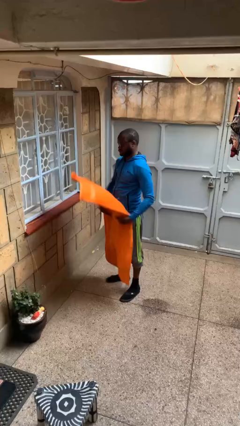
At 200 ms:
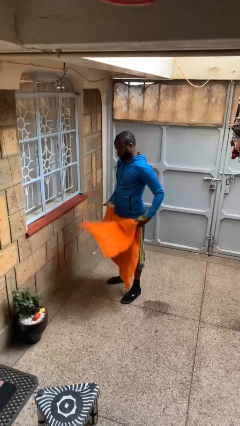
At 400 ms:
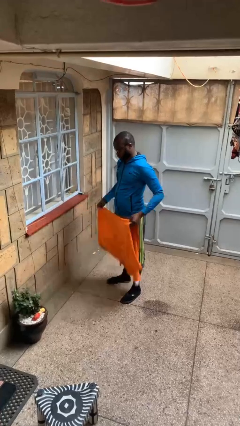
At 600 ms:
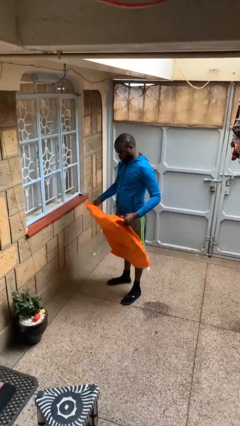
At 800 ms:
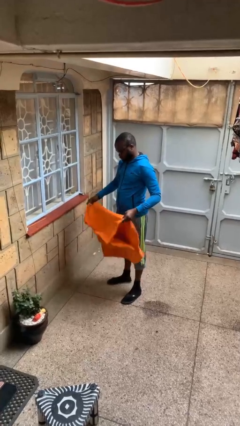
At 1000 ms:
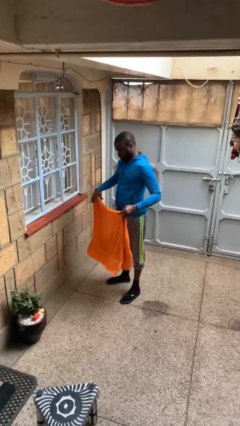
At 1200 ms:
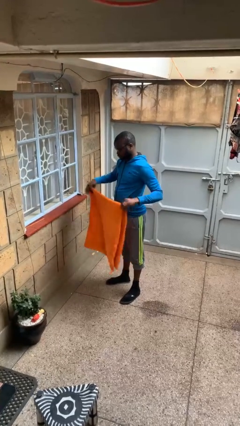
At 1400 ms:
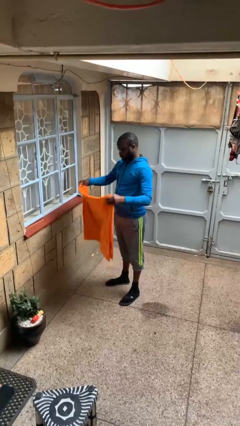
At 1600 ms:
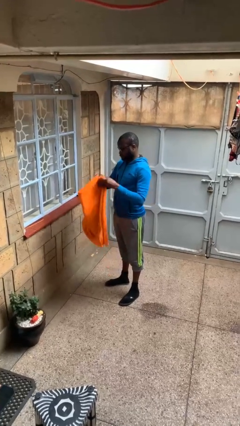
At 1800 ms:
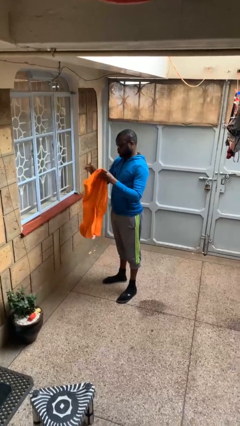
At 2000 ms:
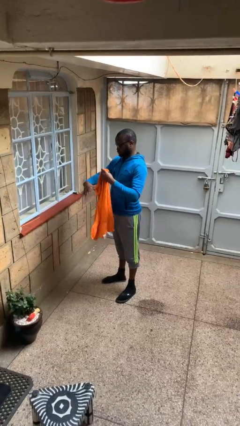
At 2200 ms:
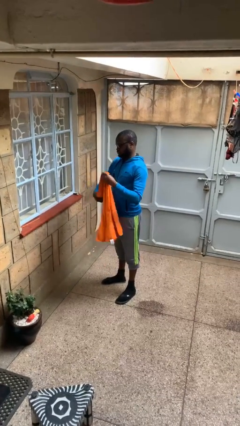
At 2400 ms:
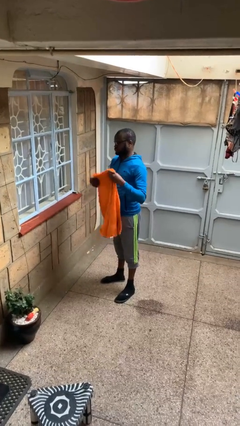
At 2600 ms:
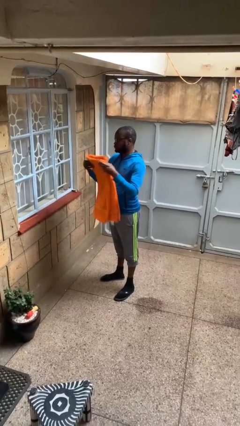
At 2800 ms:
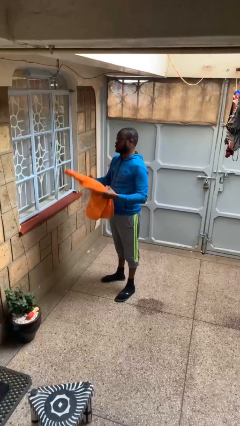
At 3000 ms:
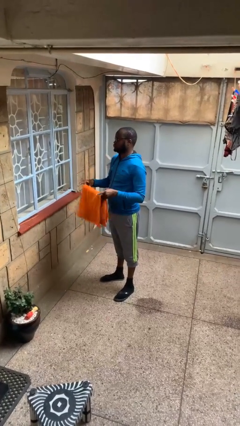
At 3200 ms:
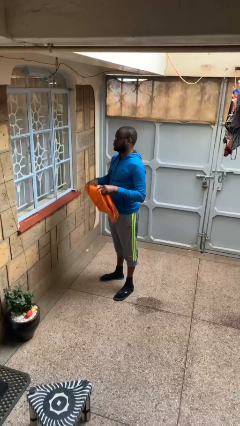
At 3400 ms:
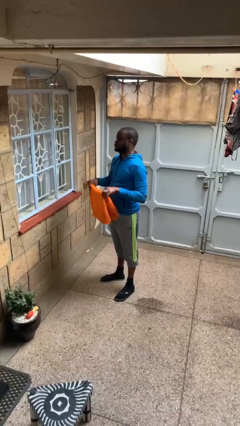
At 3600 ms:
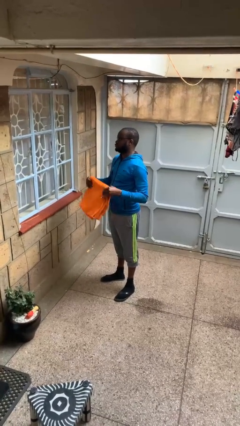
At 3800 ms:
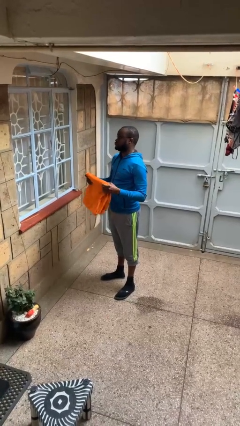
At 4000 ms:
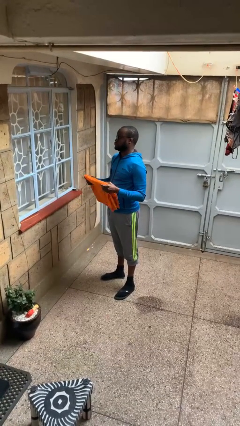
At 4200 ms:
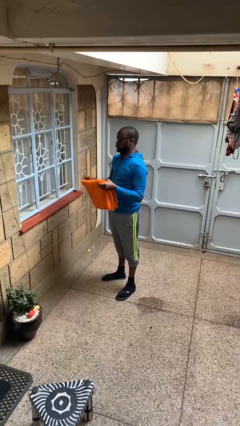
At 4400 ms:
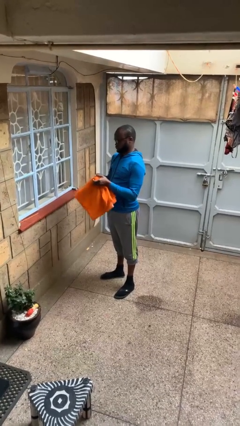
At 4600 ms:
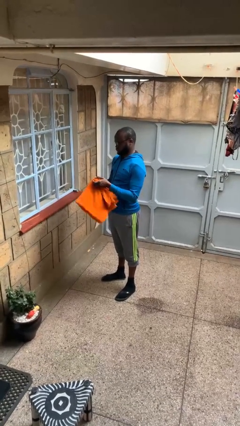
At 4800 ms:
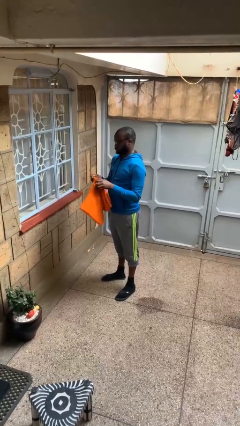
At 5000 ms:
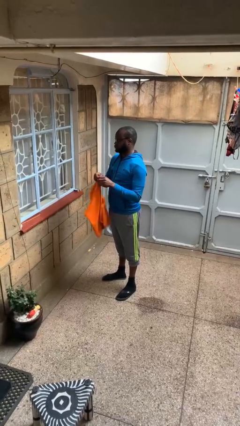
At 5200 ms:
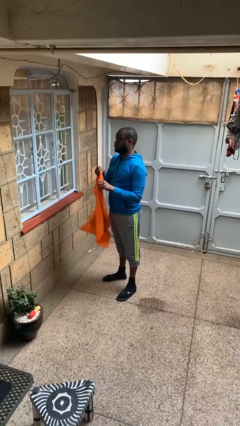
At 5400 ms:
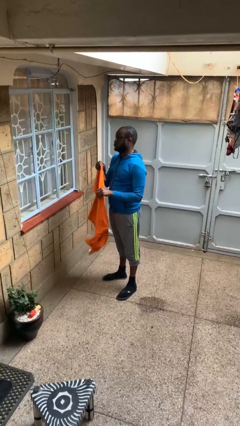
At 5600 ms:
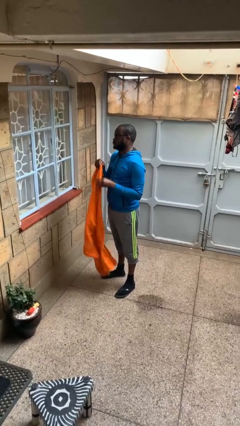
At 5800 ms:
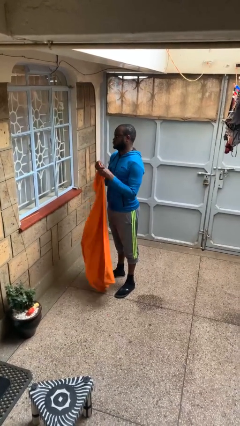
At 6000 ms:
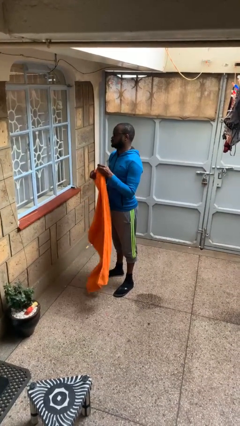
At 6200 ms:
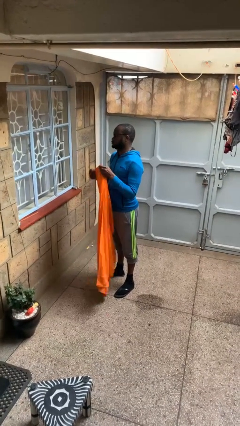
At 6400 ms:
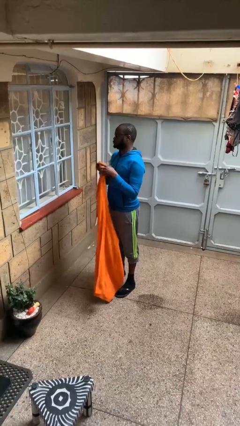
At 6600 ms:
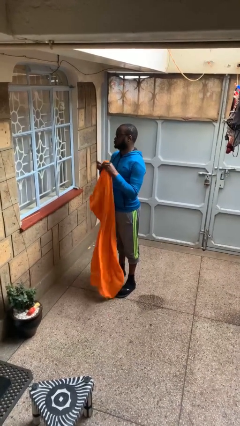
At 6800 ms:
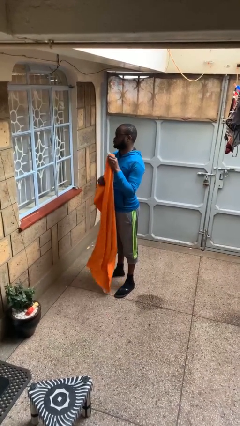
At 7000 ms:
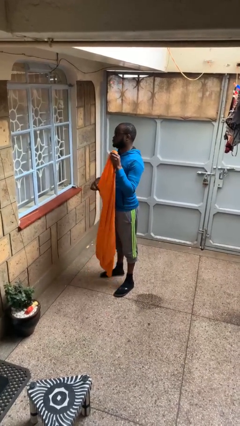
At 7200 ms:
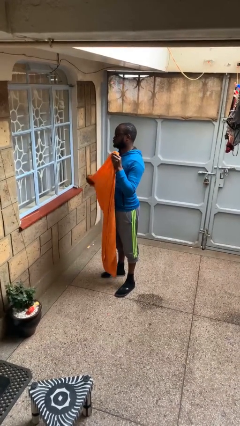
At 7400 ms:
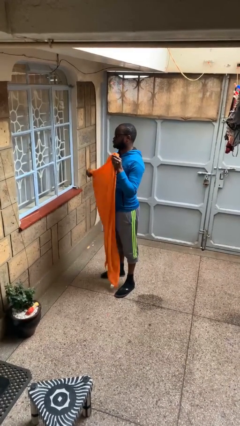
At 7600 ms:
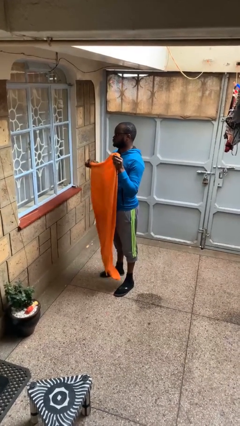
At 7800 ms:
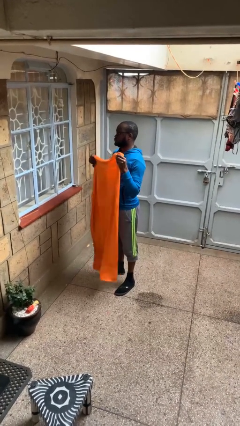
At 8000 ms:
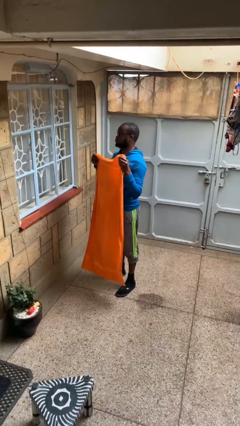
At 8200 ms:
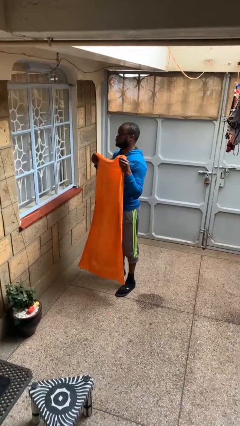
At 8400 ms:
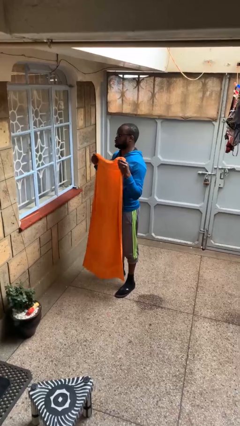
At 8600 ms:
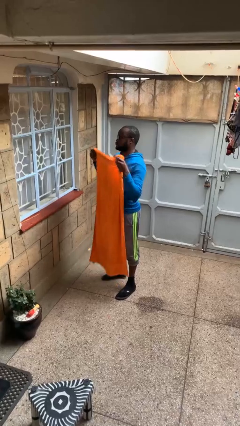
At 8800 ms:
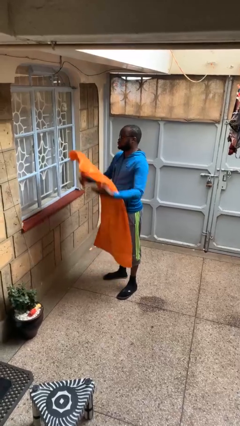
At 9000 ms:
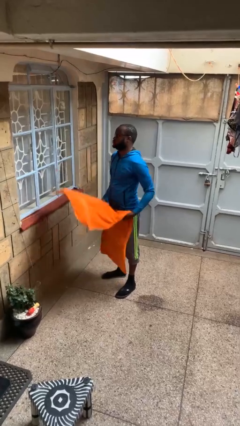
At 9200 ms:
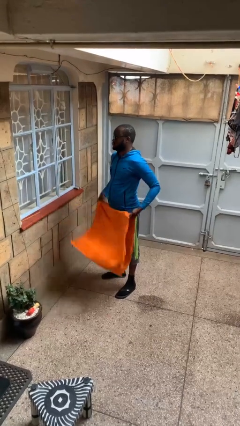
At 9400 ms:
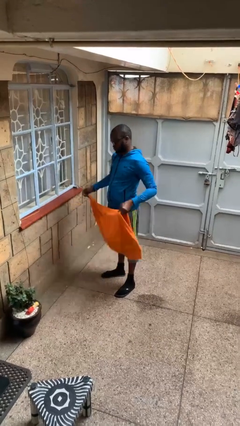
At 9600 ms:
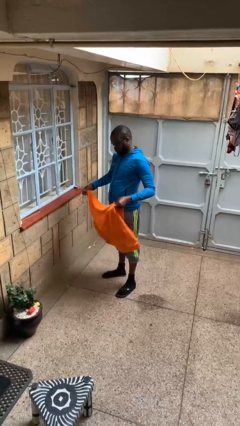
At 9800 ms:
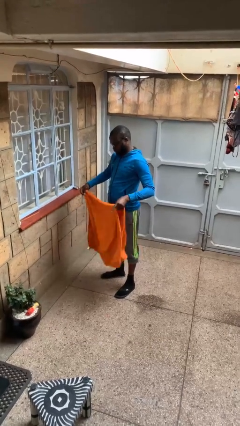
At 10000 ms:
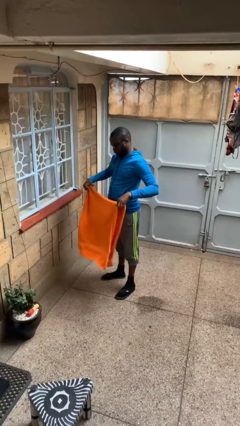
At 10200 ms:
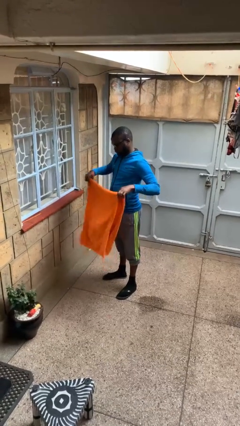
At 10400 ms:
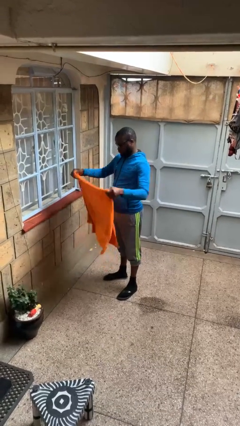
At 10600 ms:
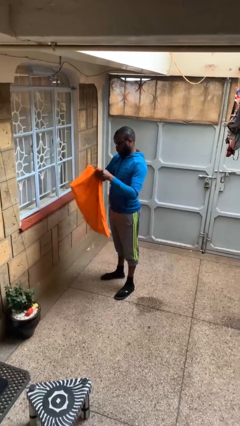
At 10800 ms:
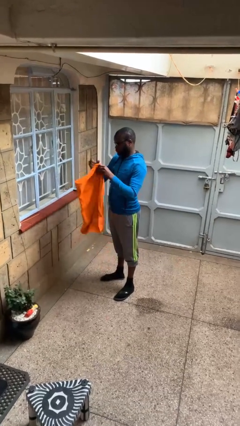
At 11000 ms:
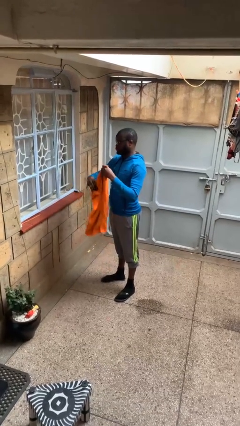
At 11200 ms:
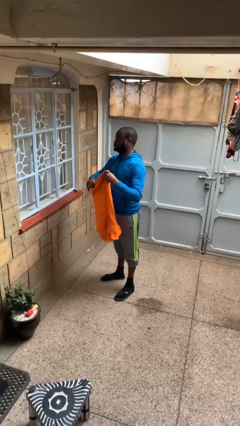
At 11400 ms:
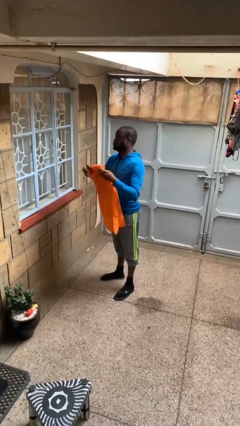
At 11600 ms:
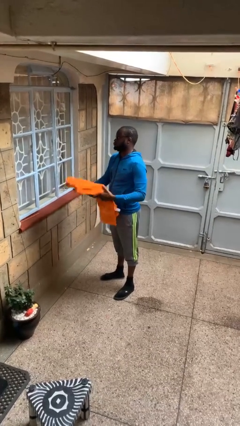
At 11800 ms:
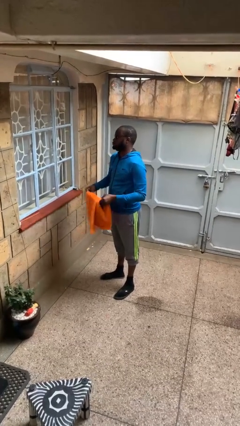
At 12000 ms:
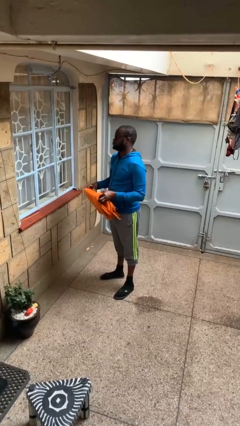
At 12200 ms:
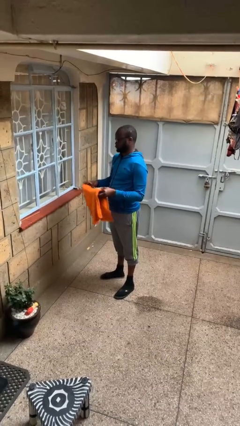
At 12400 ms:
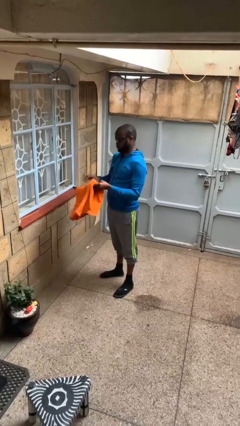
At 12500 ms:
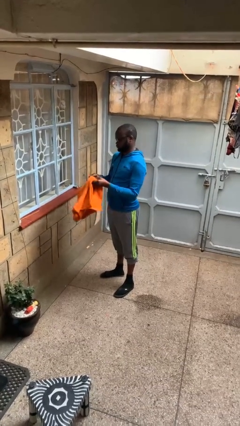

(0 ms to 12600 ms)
person folds towel

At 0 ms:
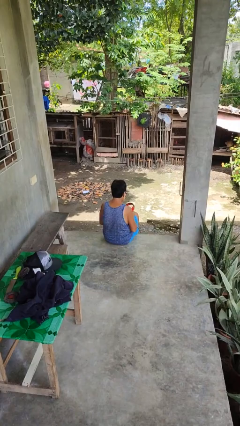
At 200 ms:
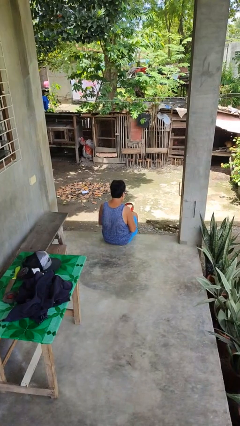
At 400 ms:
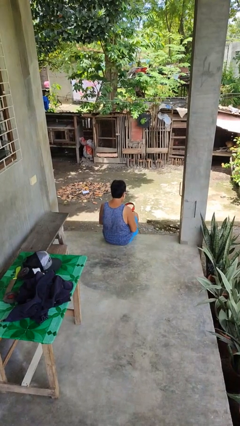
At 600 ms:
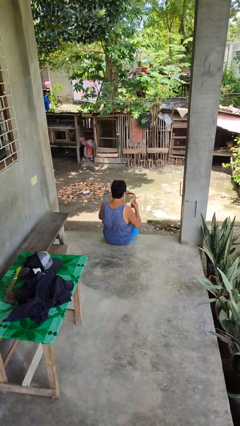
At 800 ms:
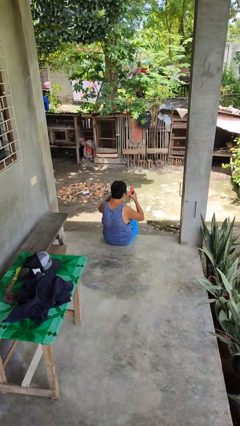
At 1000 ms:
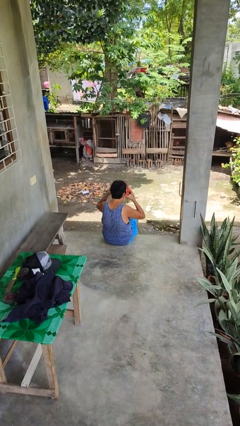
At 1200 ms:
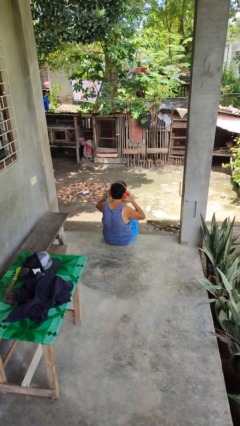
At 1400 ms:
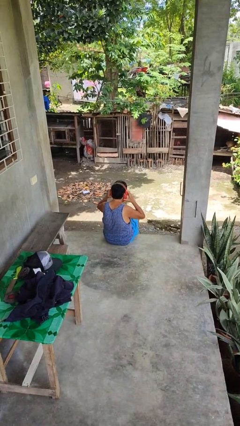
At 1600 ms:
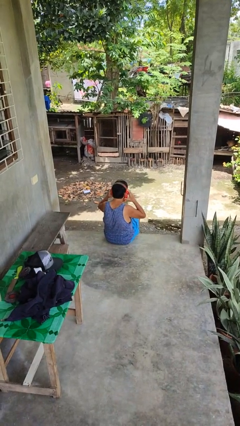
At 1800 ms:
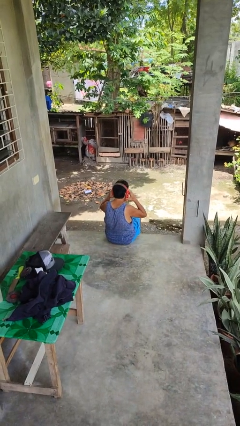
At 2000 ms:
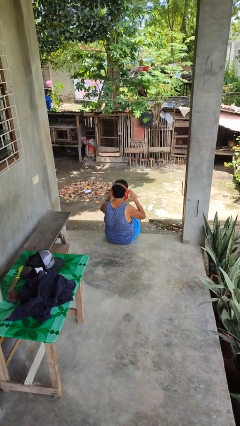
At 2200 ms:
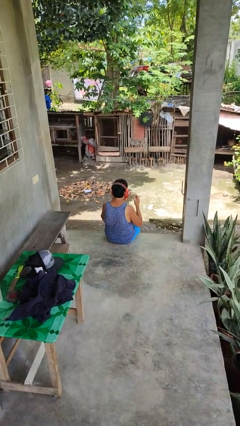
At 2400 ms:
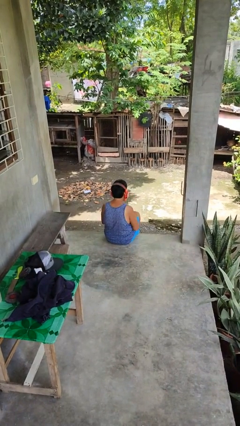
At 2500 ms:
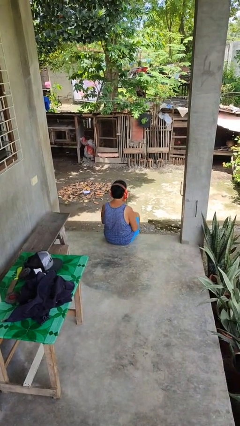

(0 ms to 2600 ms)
person puts on headphones

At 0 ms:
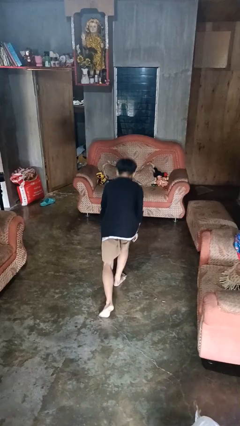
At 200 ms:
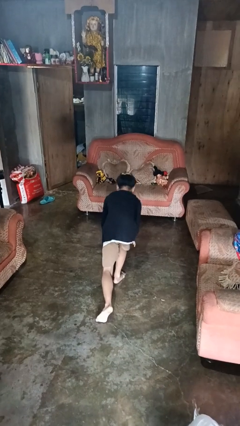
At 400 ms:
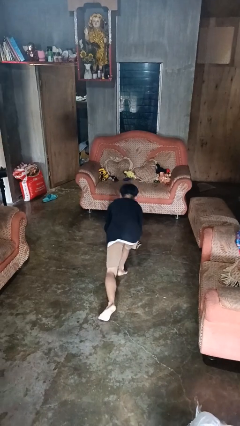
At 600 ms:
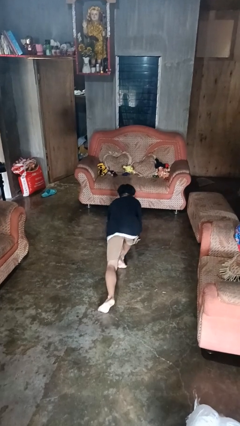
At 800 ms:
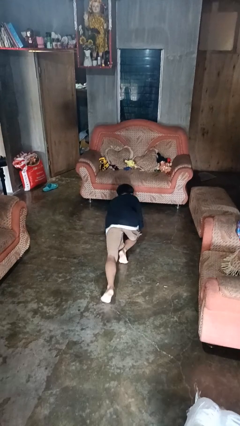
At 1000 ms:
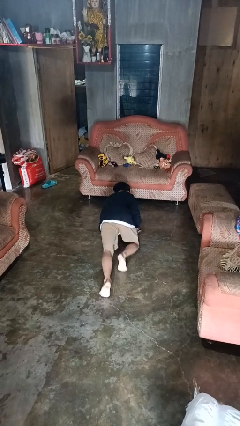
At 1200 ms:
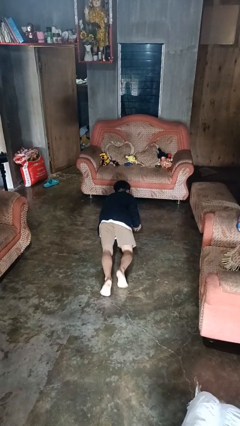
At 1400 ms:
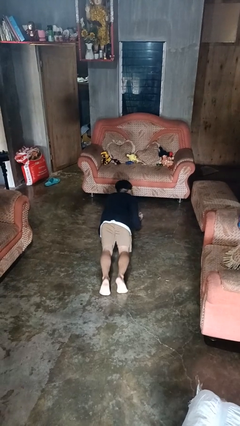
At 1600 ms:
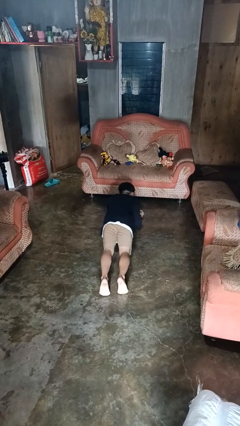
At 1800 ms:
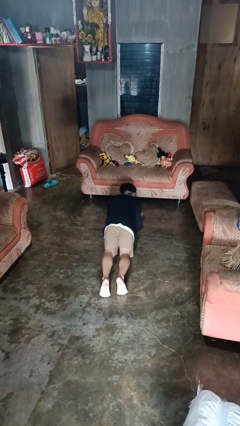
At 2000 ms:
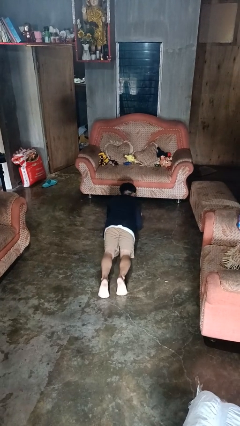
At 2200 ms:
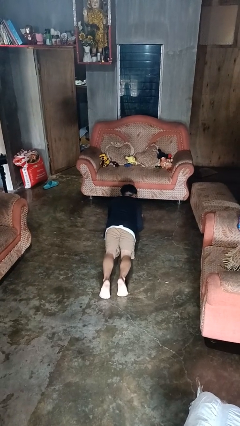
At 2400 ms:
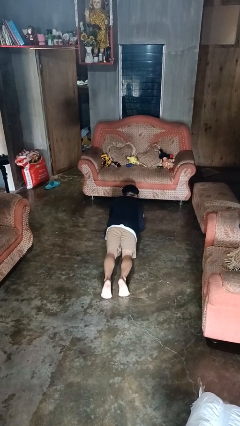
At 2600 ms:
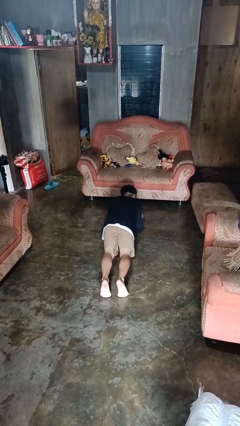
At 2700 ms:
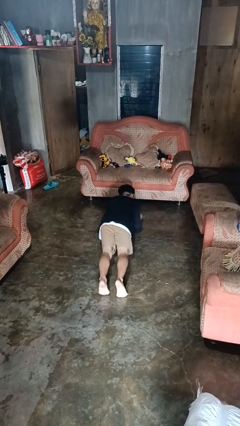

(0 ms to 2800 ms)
person exercises with plank
